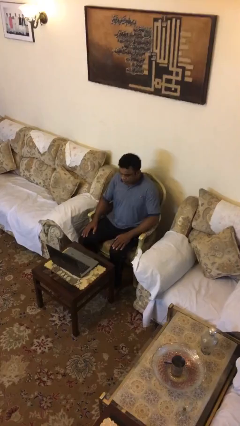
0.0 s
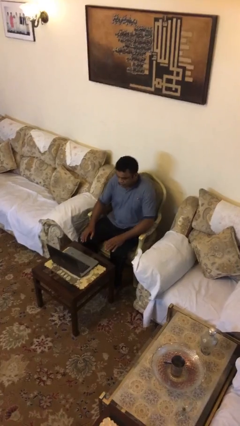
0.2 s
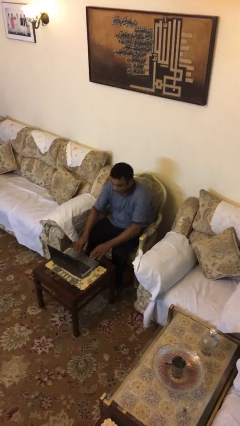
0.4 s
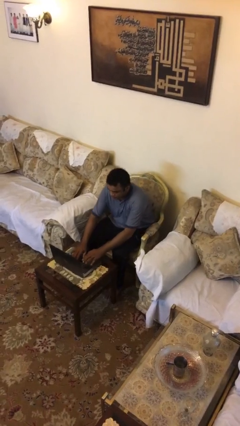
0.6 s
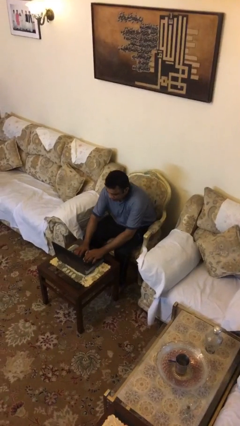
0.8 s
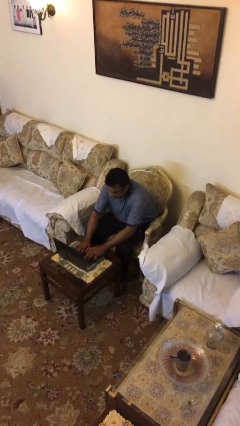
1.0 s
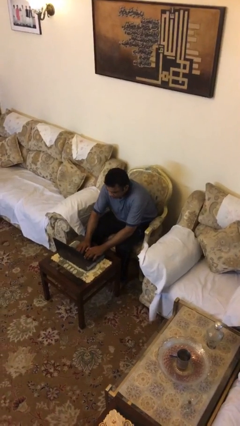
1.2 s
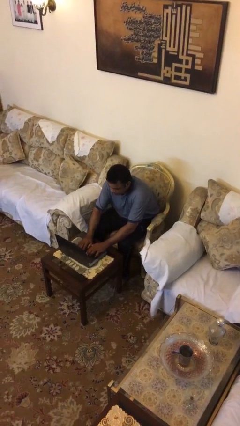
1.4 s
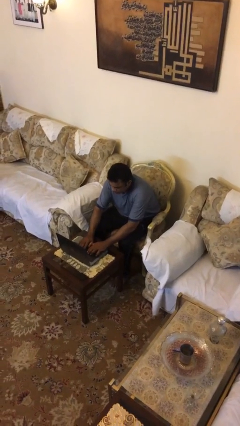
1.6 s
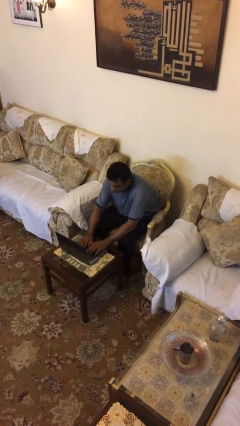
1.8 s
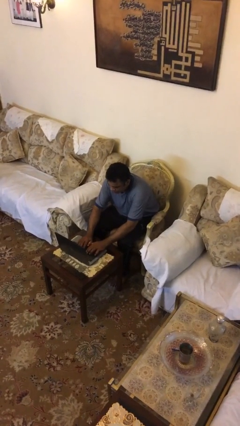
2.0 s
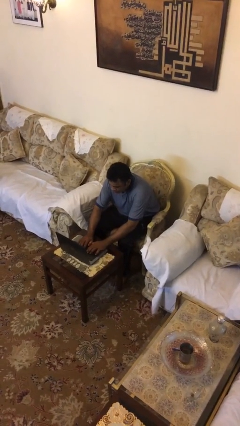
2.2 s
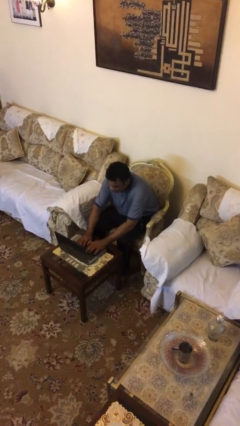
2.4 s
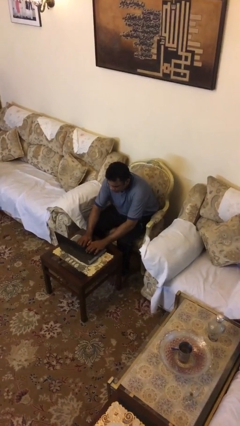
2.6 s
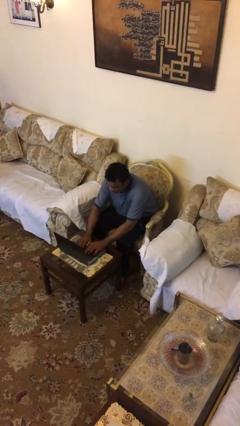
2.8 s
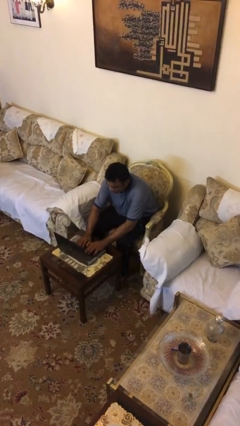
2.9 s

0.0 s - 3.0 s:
person interacts with laptop

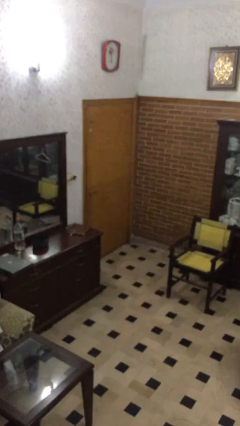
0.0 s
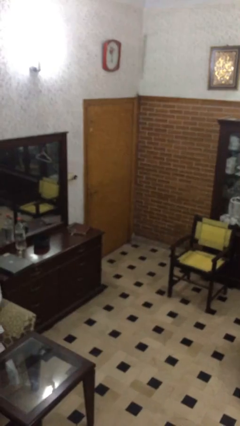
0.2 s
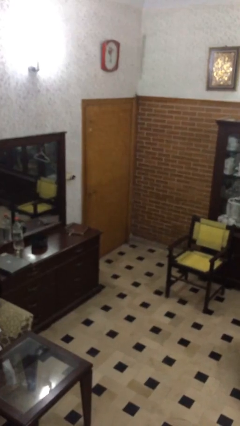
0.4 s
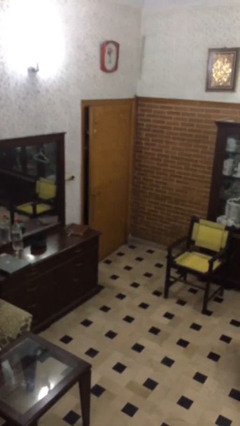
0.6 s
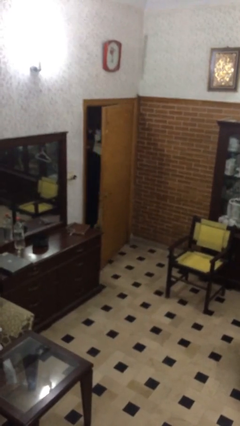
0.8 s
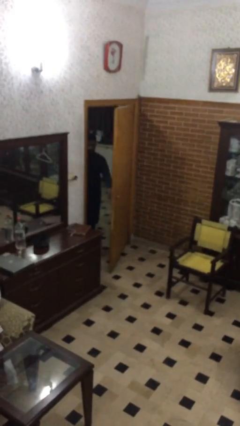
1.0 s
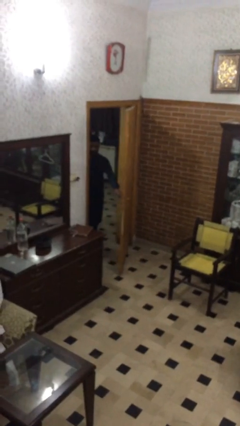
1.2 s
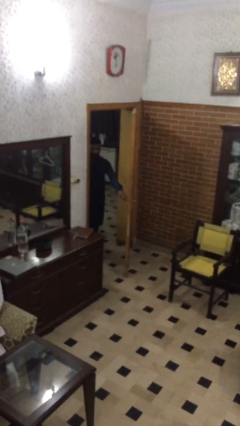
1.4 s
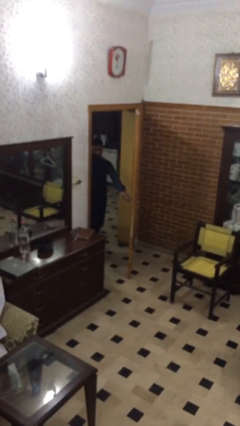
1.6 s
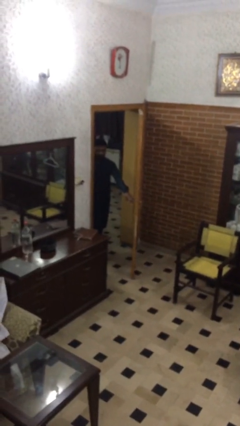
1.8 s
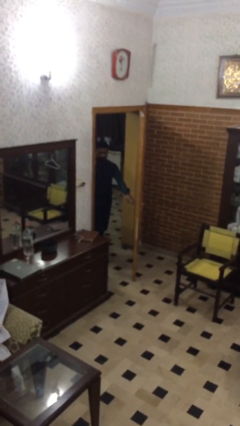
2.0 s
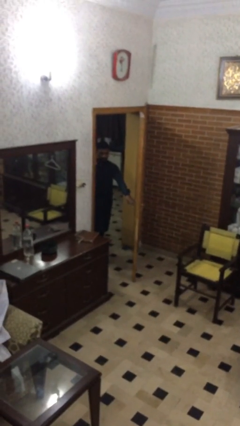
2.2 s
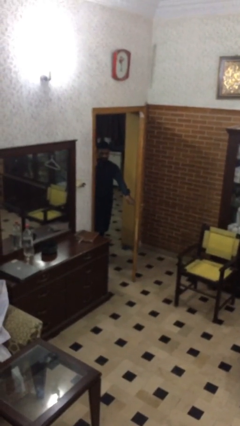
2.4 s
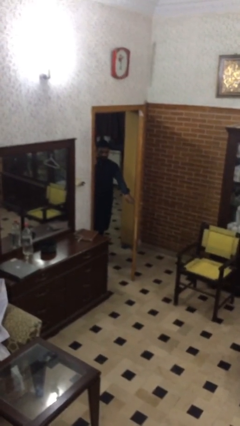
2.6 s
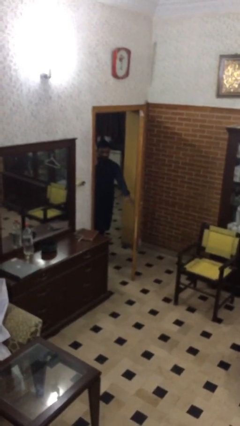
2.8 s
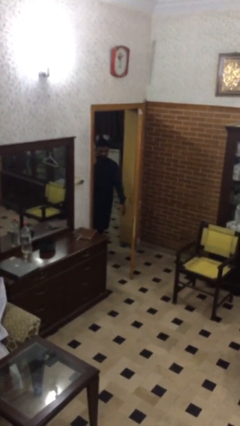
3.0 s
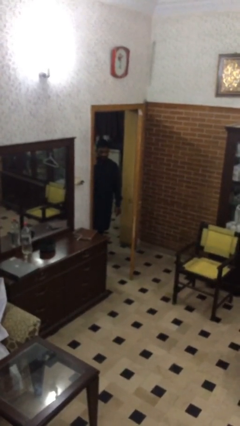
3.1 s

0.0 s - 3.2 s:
person opens facility door

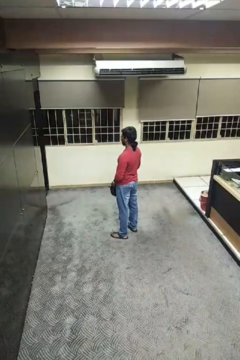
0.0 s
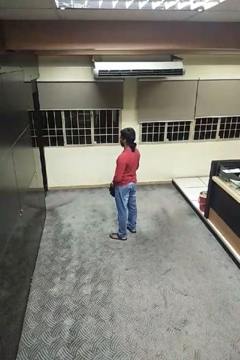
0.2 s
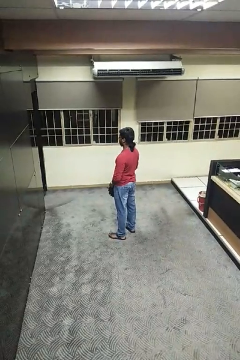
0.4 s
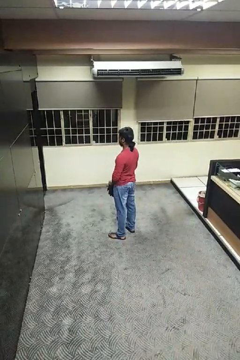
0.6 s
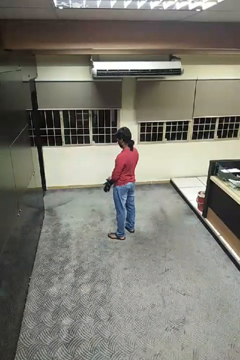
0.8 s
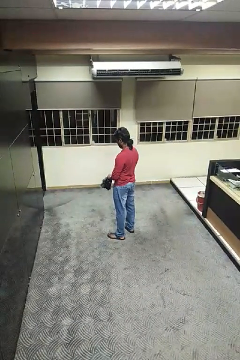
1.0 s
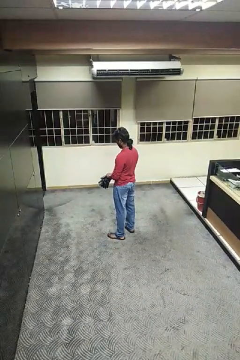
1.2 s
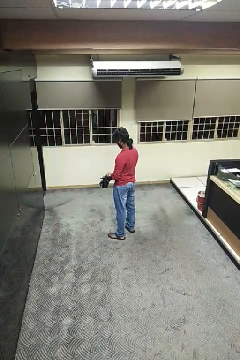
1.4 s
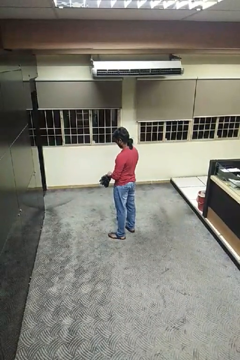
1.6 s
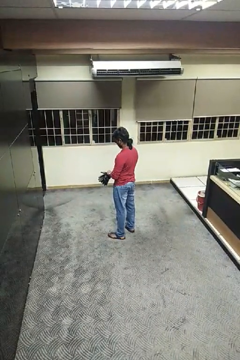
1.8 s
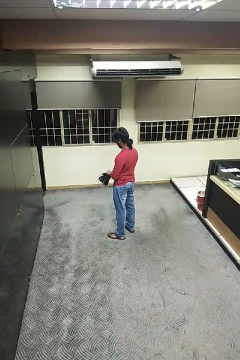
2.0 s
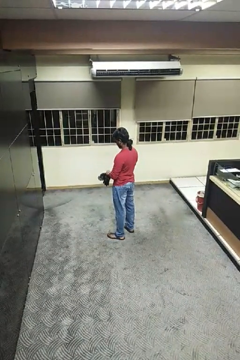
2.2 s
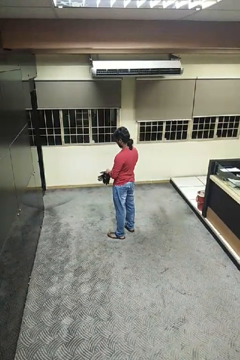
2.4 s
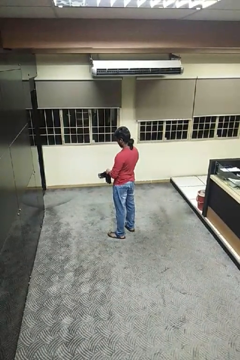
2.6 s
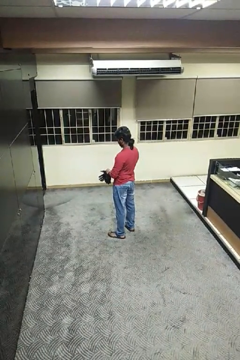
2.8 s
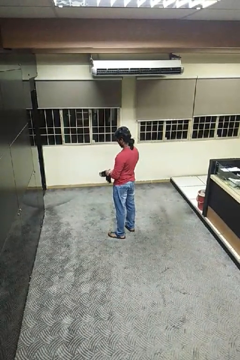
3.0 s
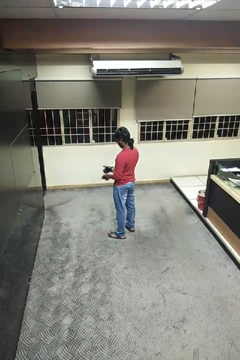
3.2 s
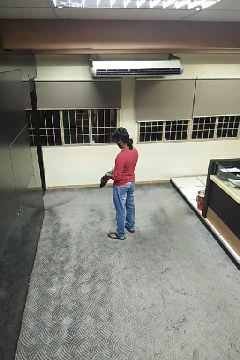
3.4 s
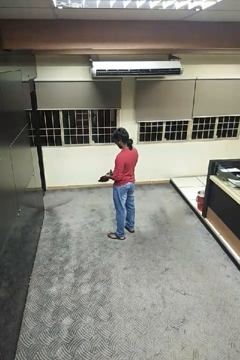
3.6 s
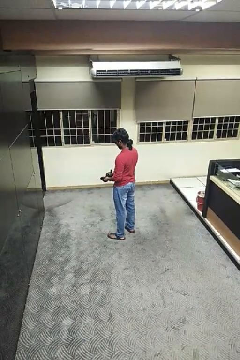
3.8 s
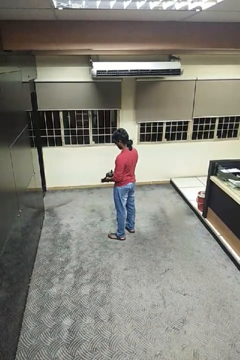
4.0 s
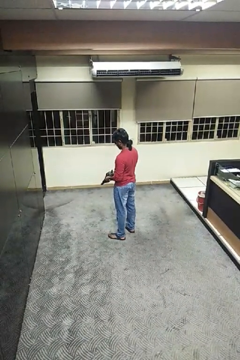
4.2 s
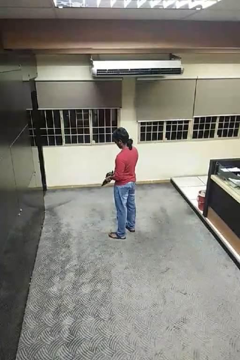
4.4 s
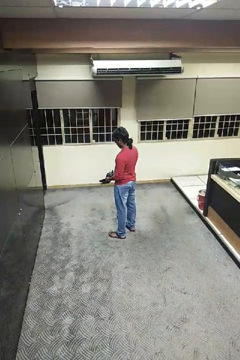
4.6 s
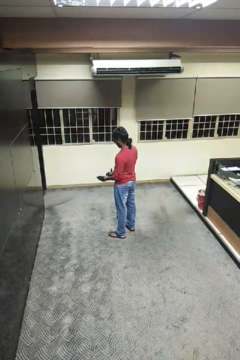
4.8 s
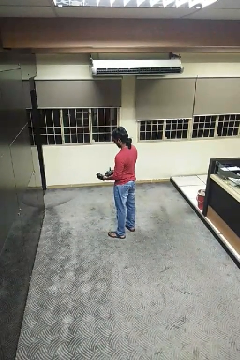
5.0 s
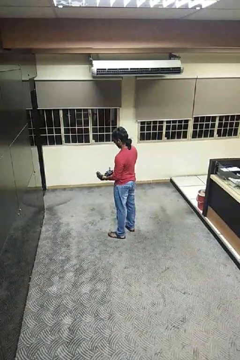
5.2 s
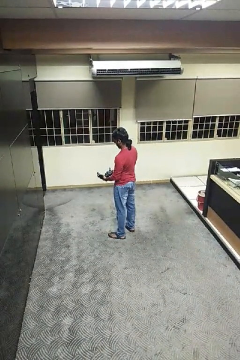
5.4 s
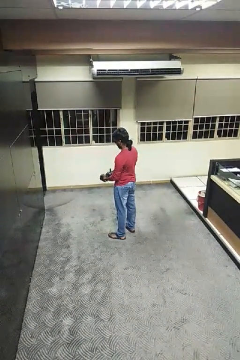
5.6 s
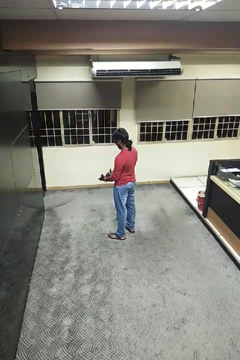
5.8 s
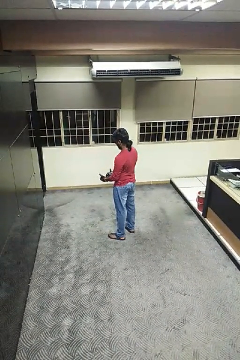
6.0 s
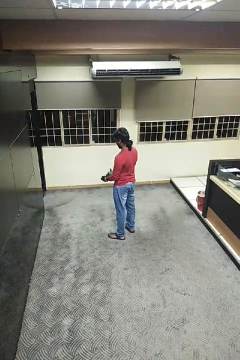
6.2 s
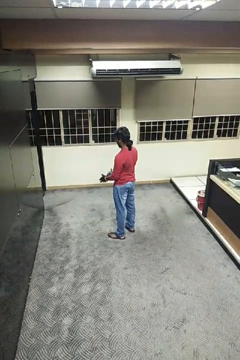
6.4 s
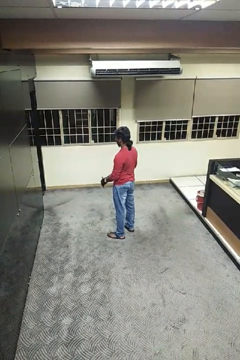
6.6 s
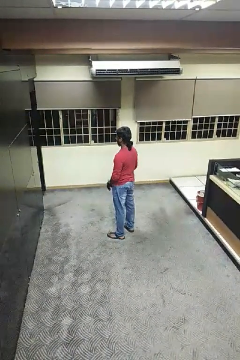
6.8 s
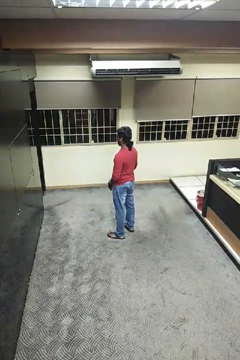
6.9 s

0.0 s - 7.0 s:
person puts on gloves

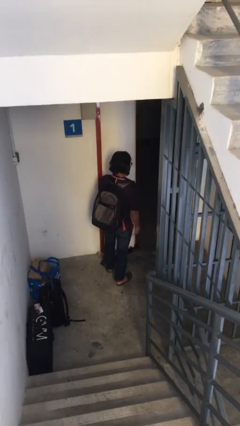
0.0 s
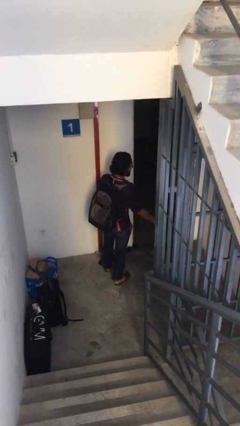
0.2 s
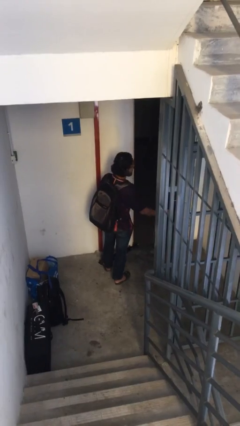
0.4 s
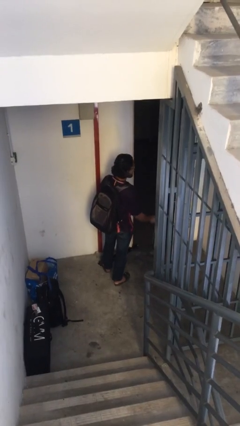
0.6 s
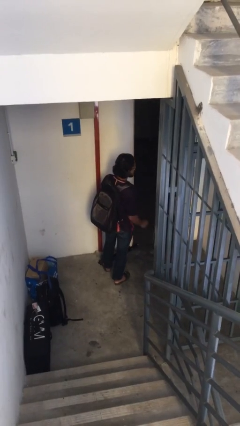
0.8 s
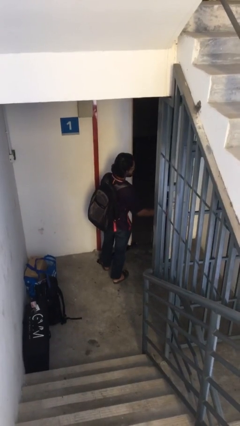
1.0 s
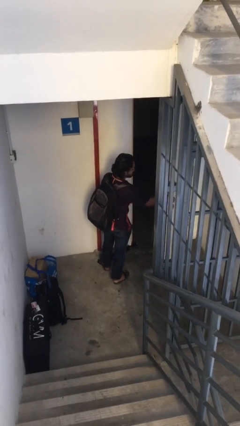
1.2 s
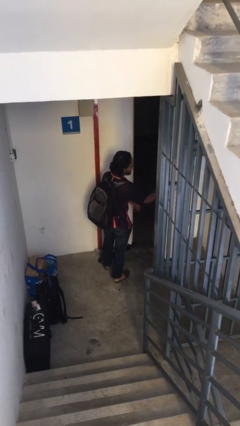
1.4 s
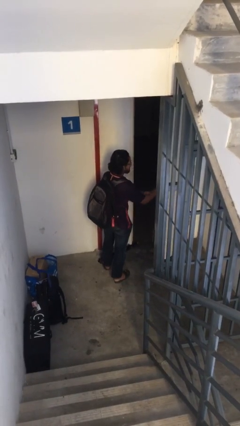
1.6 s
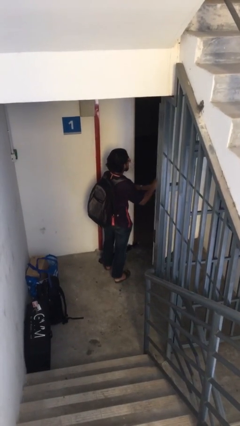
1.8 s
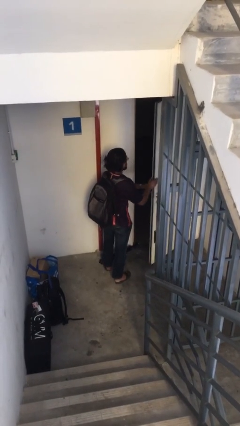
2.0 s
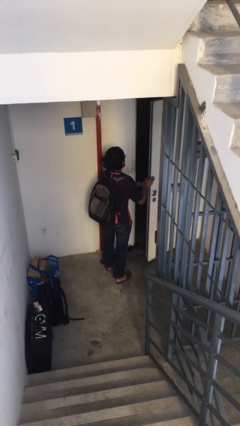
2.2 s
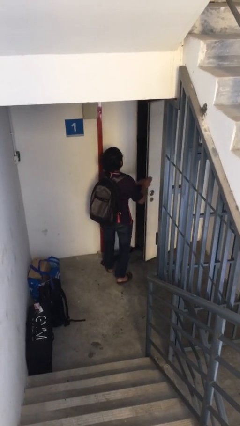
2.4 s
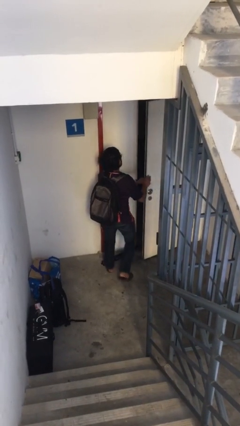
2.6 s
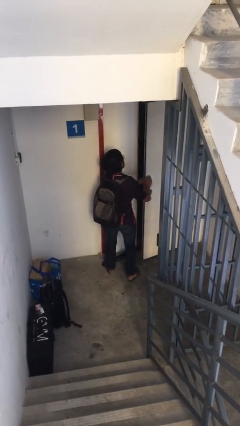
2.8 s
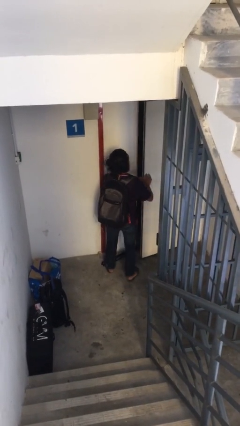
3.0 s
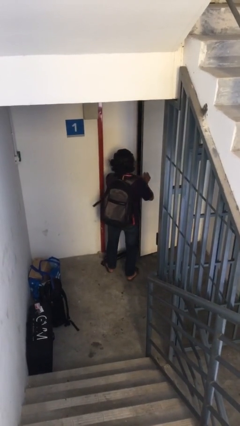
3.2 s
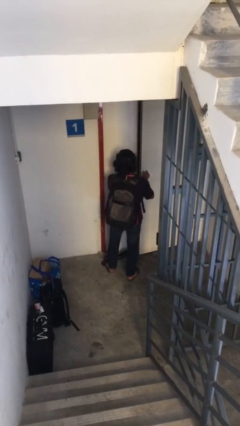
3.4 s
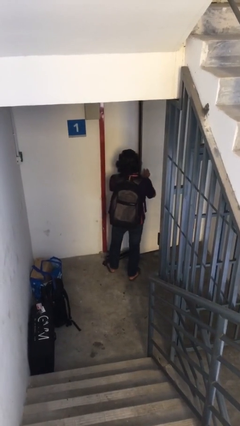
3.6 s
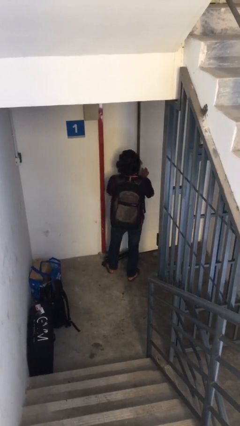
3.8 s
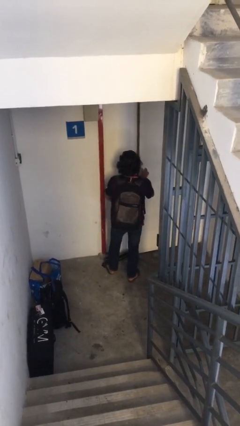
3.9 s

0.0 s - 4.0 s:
person closes facility door

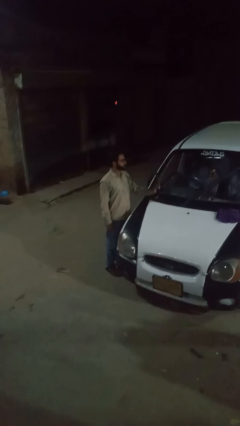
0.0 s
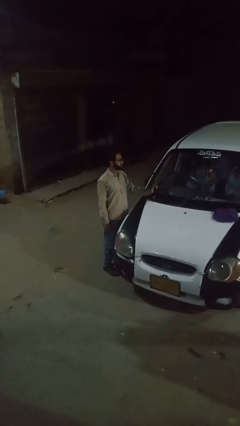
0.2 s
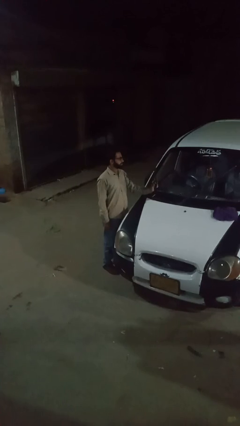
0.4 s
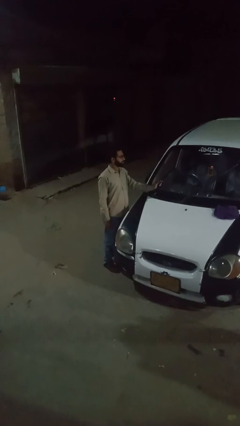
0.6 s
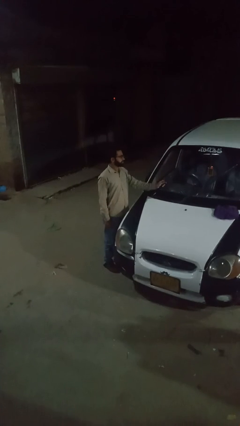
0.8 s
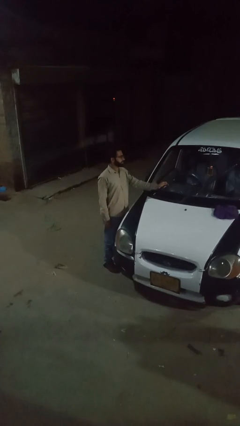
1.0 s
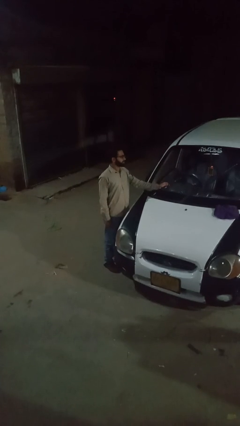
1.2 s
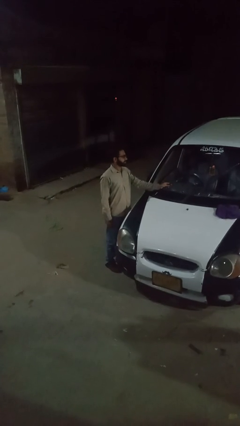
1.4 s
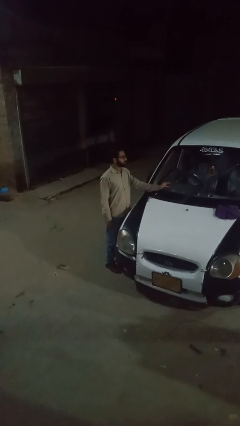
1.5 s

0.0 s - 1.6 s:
person flips down car wipers

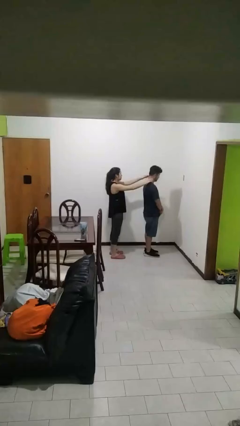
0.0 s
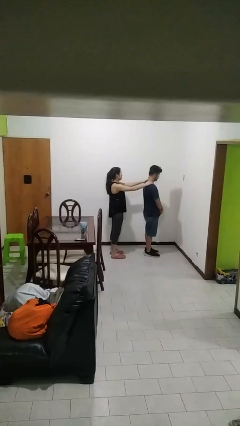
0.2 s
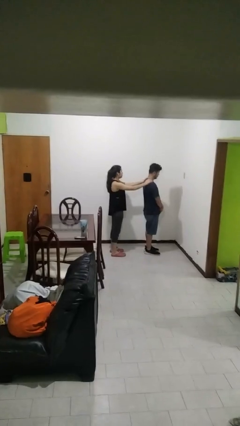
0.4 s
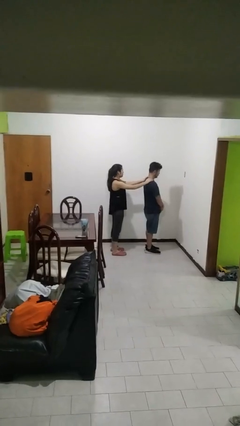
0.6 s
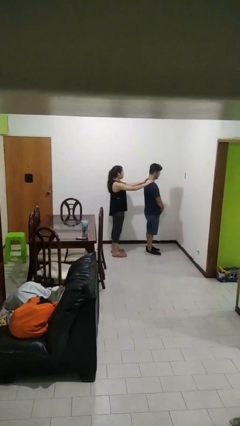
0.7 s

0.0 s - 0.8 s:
person grabs person by shoulder
